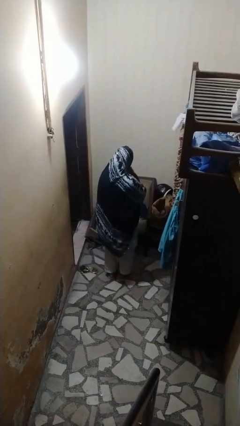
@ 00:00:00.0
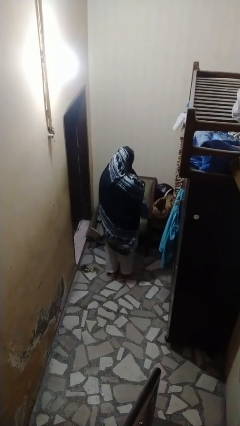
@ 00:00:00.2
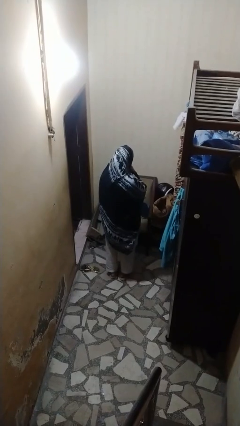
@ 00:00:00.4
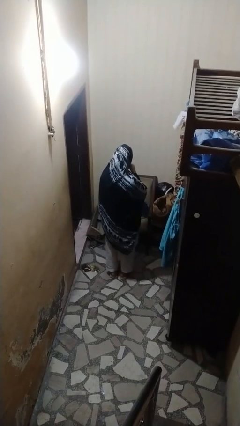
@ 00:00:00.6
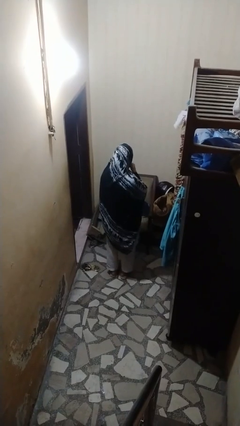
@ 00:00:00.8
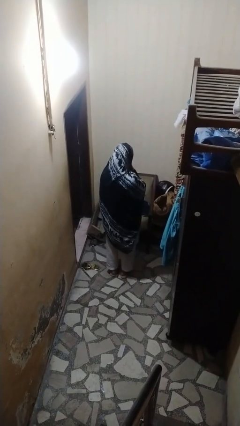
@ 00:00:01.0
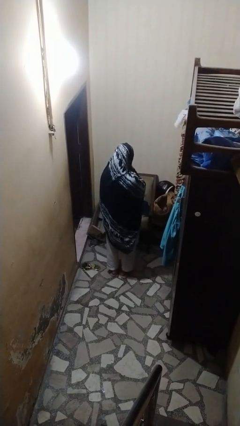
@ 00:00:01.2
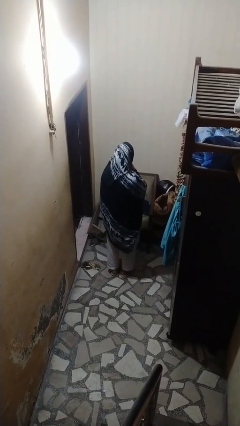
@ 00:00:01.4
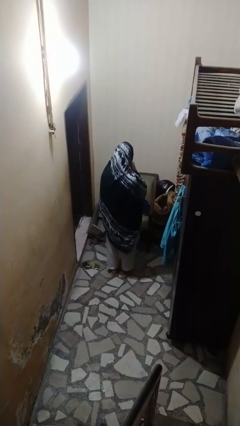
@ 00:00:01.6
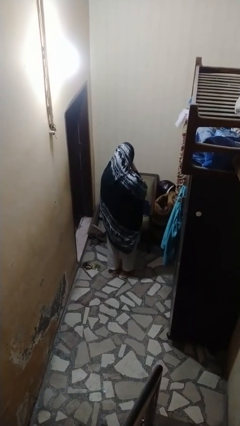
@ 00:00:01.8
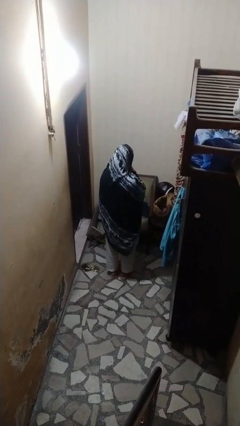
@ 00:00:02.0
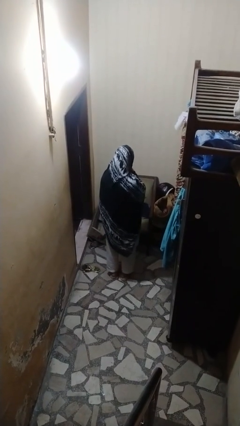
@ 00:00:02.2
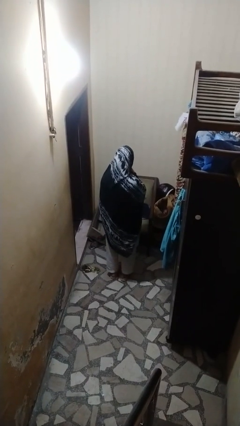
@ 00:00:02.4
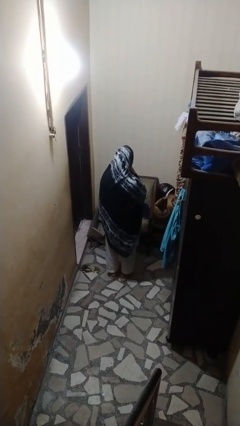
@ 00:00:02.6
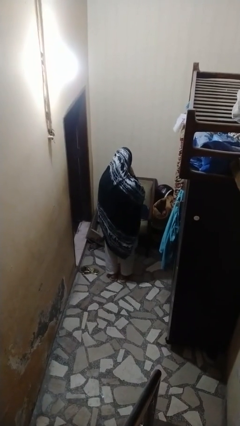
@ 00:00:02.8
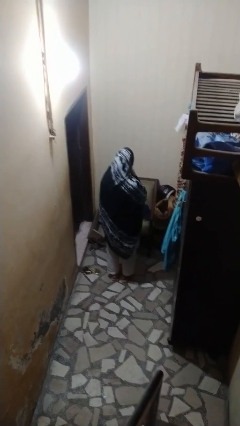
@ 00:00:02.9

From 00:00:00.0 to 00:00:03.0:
person strokes chin

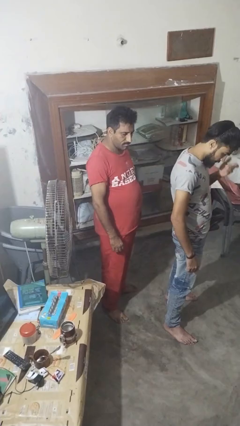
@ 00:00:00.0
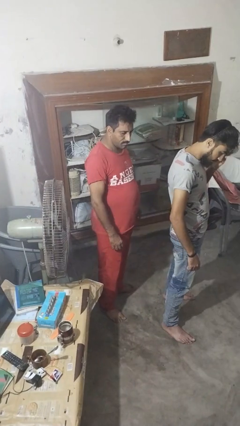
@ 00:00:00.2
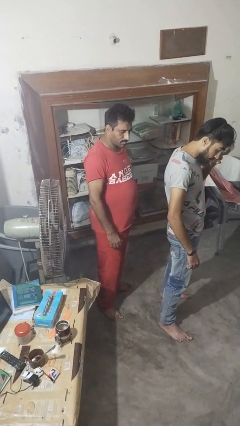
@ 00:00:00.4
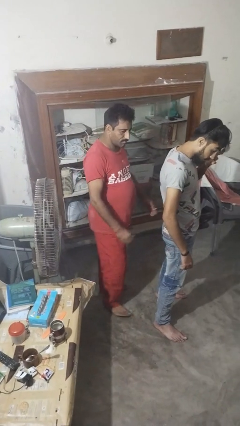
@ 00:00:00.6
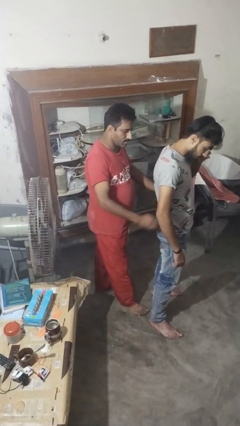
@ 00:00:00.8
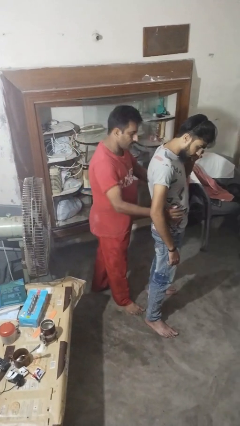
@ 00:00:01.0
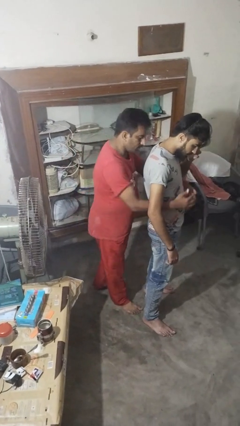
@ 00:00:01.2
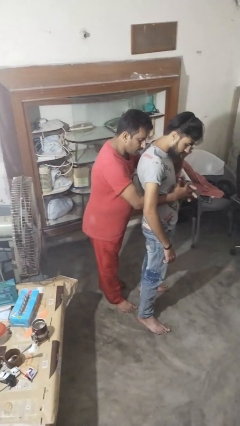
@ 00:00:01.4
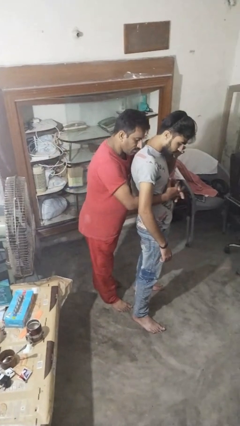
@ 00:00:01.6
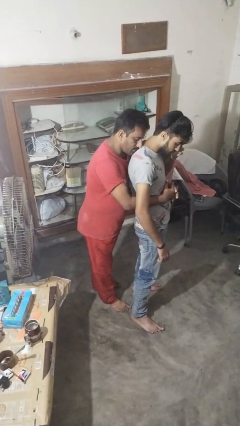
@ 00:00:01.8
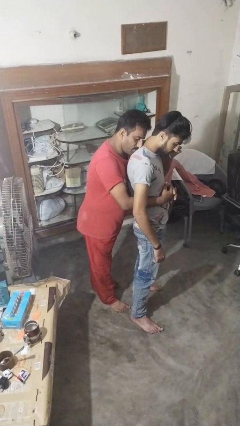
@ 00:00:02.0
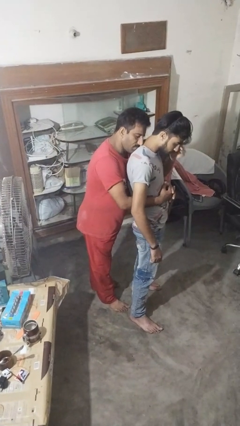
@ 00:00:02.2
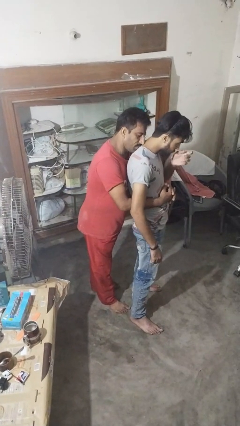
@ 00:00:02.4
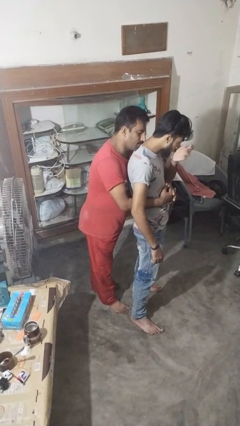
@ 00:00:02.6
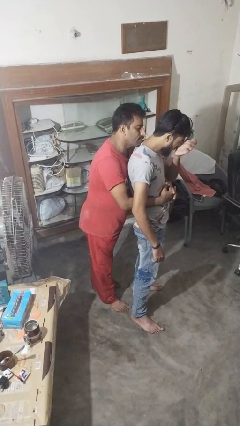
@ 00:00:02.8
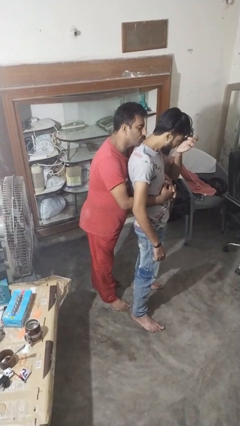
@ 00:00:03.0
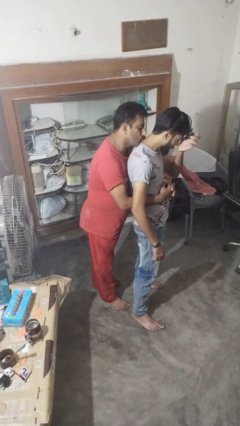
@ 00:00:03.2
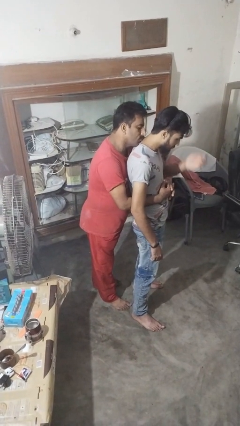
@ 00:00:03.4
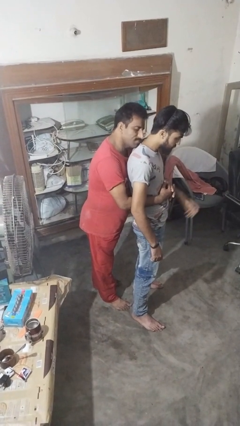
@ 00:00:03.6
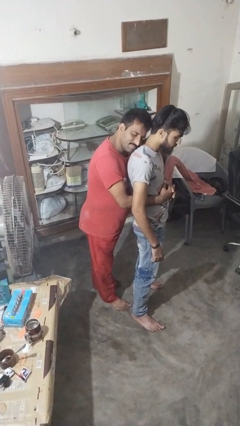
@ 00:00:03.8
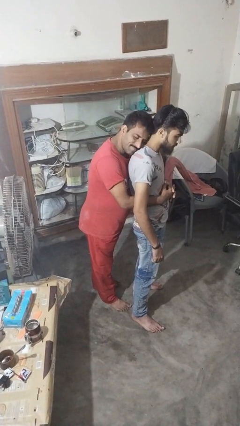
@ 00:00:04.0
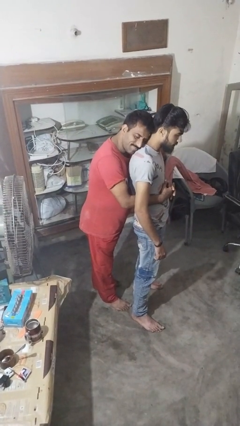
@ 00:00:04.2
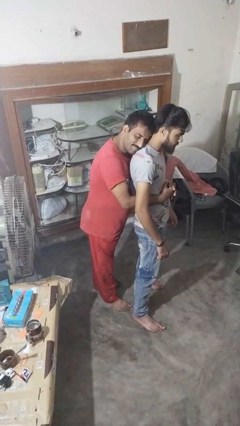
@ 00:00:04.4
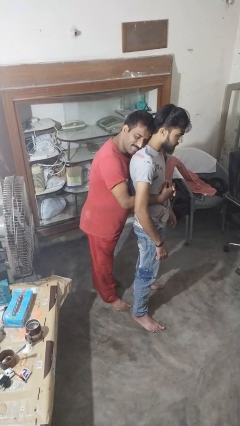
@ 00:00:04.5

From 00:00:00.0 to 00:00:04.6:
person hugs person from behind

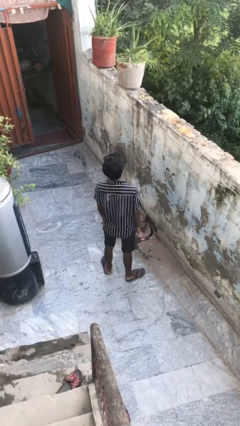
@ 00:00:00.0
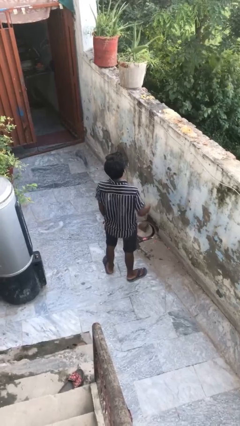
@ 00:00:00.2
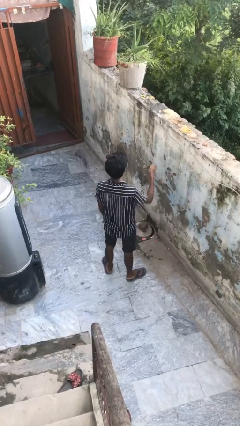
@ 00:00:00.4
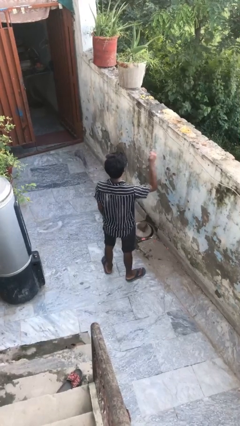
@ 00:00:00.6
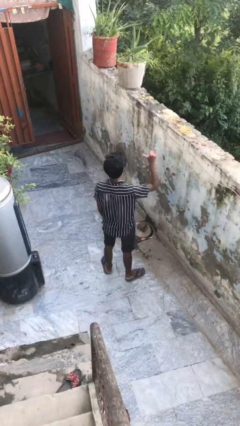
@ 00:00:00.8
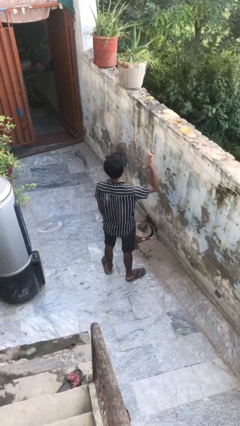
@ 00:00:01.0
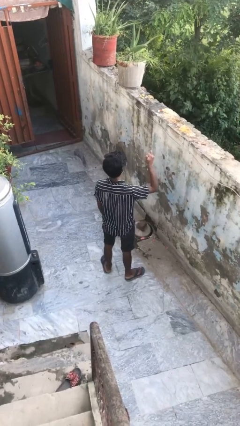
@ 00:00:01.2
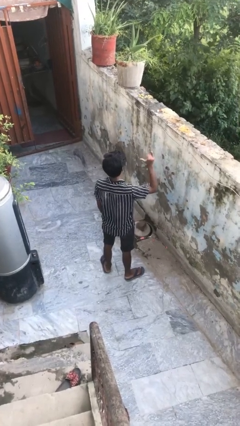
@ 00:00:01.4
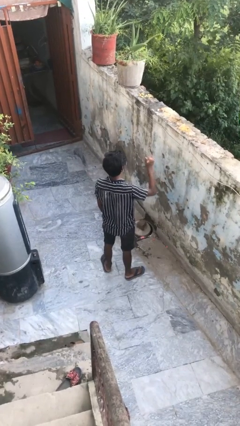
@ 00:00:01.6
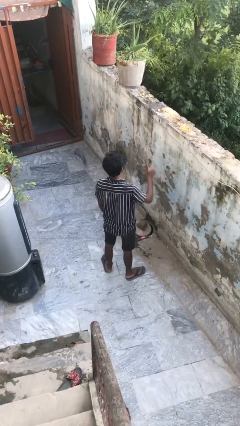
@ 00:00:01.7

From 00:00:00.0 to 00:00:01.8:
person gestures hang loose

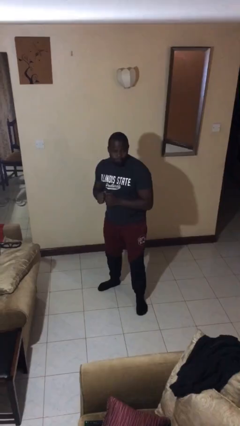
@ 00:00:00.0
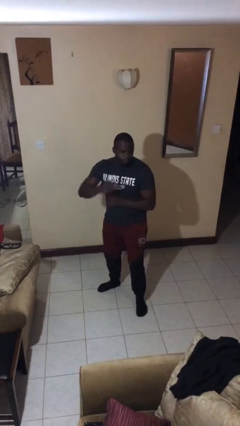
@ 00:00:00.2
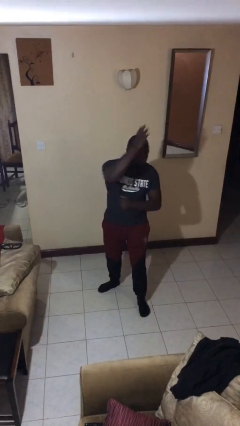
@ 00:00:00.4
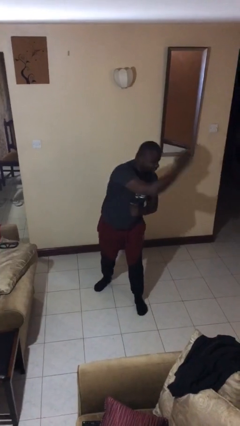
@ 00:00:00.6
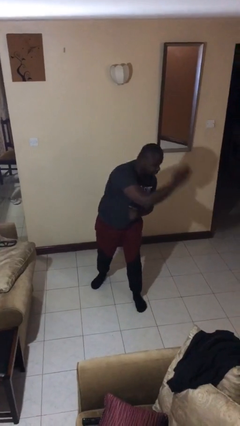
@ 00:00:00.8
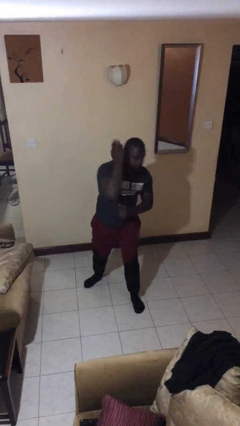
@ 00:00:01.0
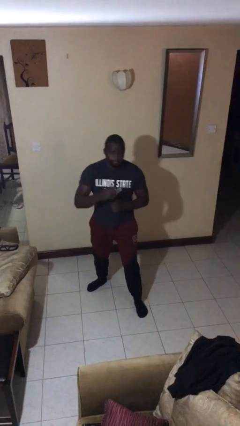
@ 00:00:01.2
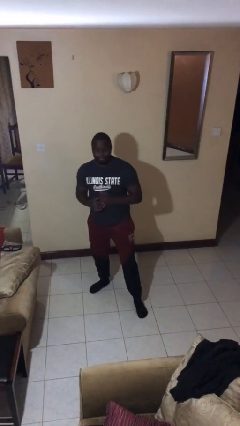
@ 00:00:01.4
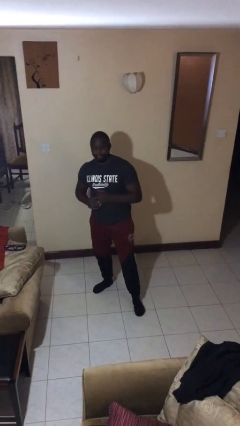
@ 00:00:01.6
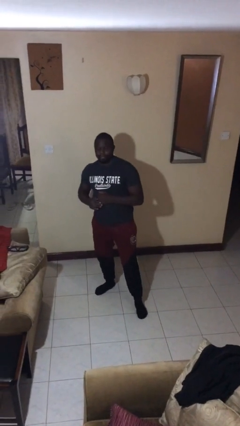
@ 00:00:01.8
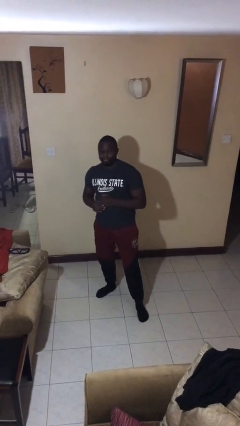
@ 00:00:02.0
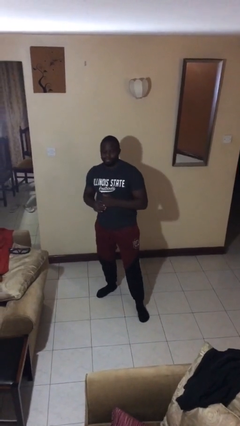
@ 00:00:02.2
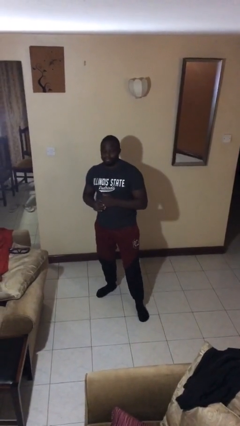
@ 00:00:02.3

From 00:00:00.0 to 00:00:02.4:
person karate chop

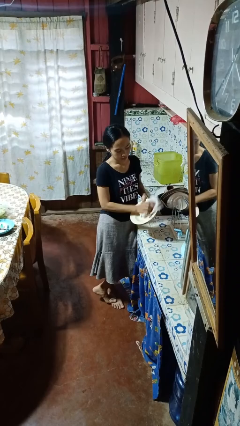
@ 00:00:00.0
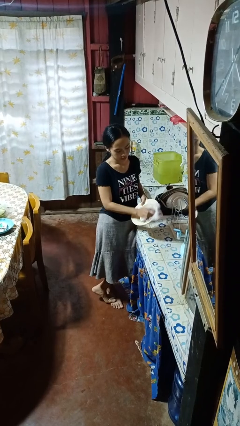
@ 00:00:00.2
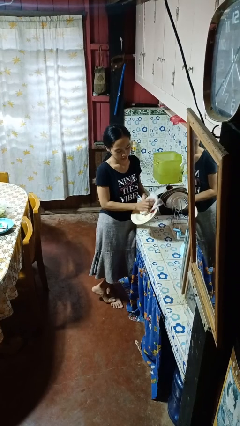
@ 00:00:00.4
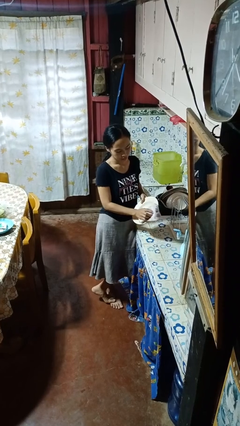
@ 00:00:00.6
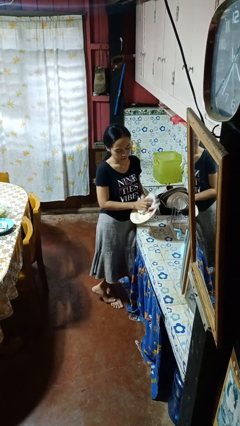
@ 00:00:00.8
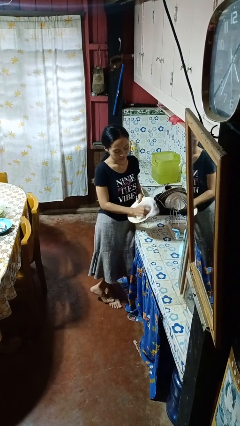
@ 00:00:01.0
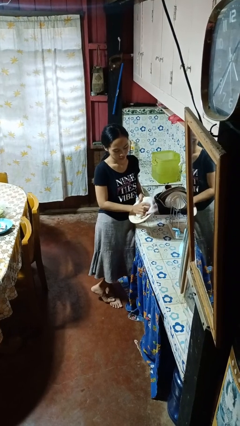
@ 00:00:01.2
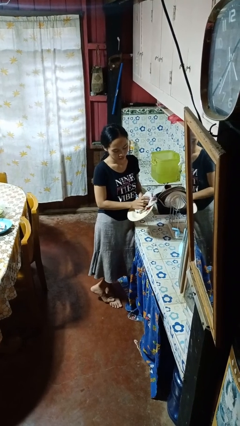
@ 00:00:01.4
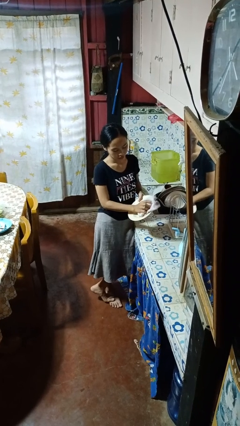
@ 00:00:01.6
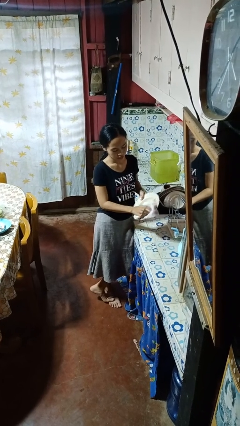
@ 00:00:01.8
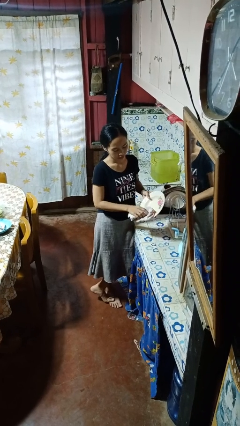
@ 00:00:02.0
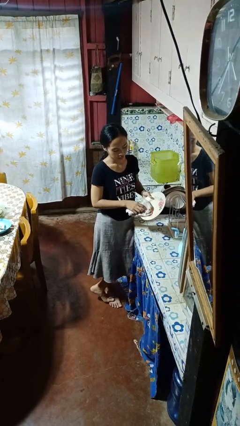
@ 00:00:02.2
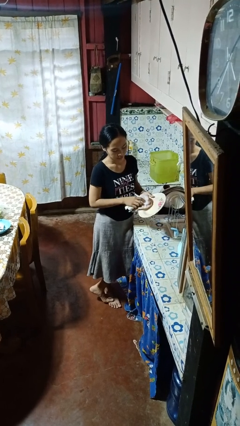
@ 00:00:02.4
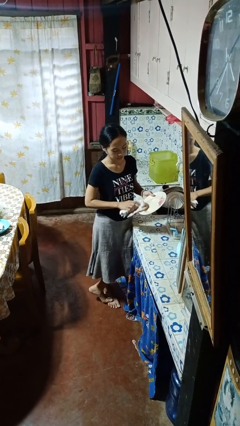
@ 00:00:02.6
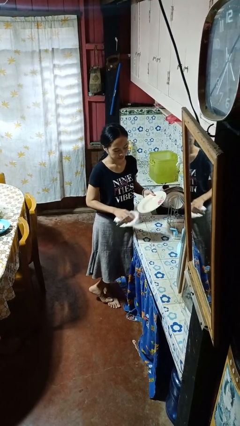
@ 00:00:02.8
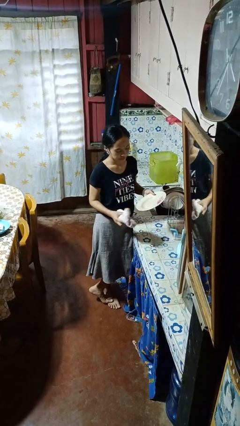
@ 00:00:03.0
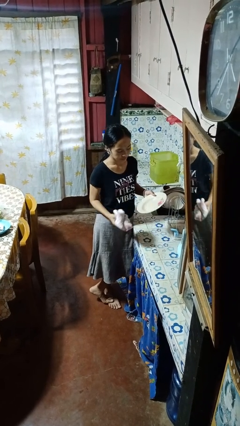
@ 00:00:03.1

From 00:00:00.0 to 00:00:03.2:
person dries dish

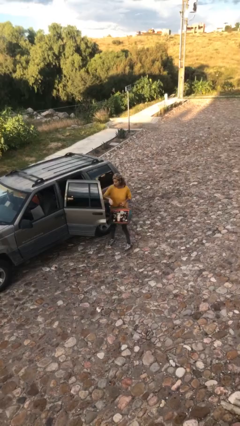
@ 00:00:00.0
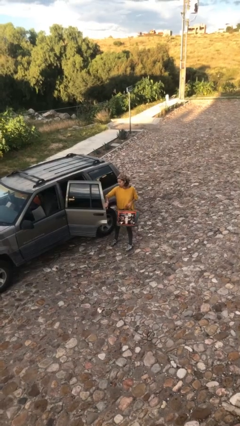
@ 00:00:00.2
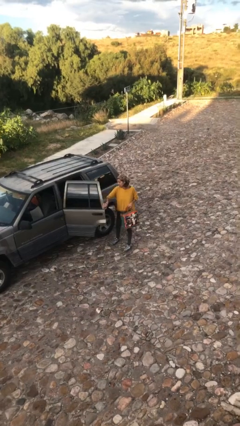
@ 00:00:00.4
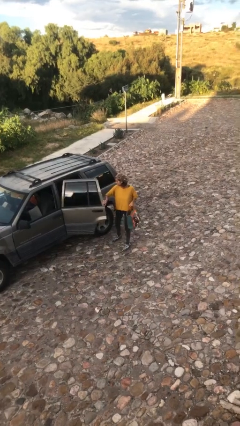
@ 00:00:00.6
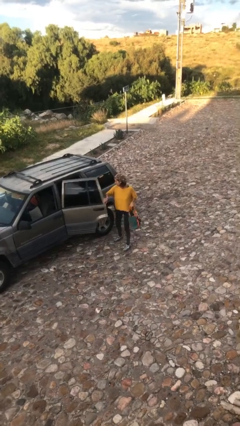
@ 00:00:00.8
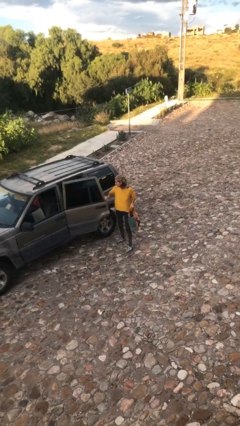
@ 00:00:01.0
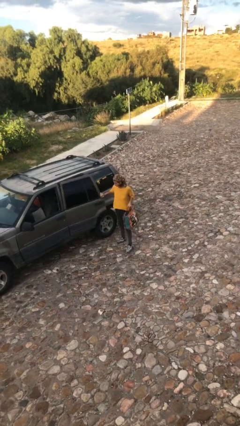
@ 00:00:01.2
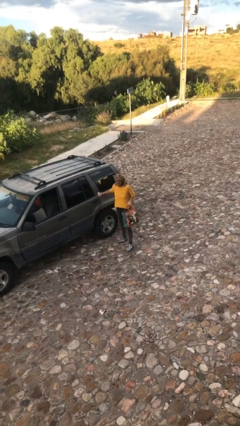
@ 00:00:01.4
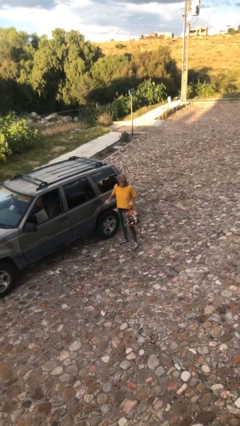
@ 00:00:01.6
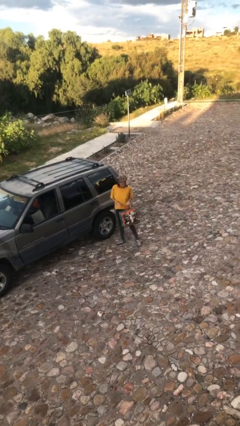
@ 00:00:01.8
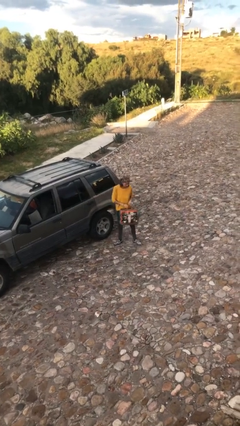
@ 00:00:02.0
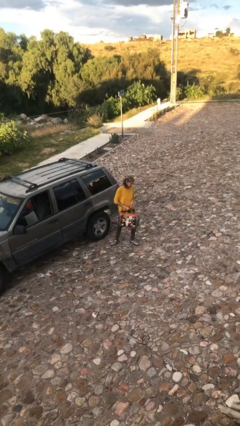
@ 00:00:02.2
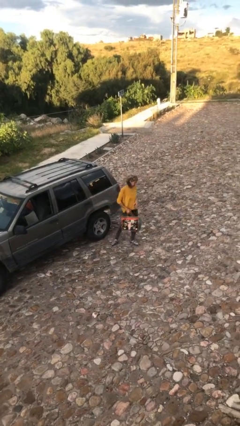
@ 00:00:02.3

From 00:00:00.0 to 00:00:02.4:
person closes car door
